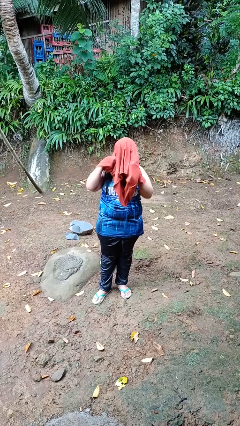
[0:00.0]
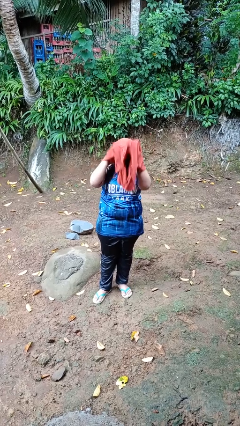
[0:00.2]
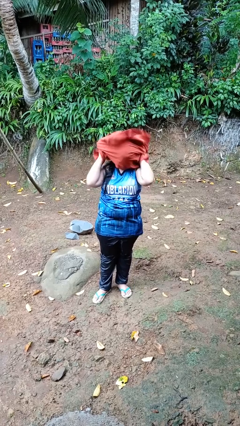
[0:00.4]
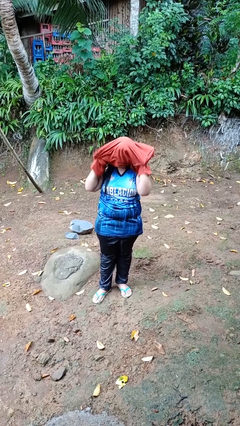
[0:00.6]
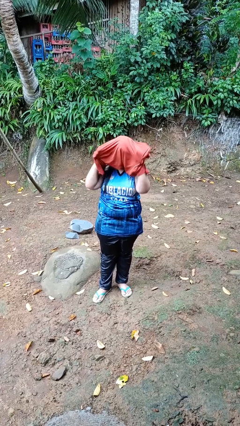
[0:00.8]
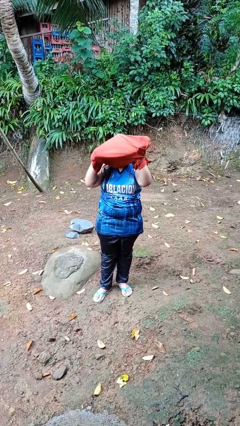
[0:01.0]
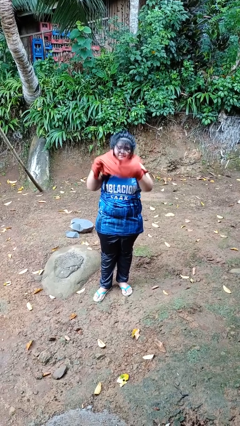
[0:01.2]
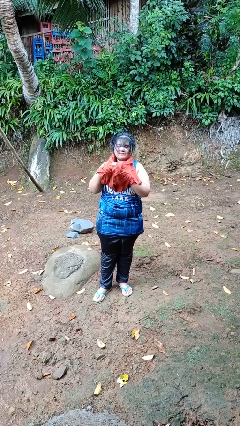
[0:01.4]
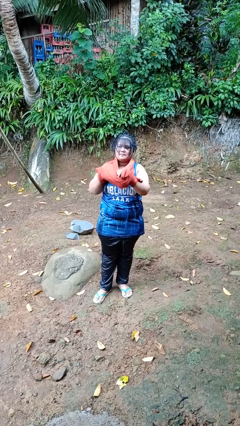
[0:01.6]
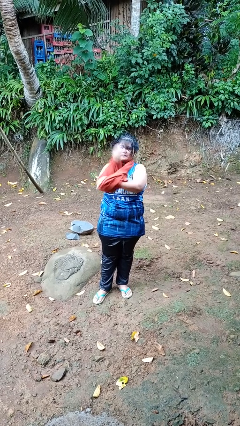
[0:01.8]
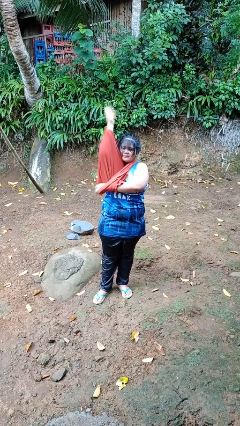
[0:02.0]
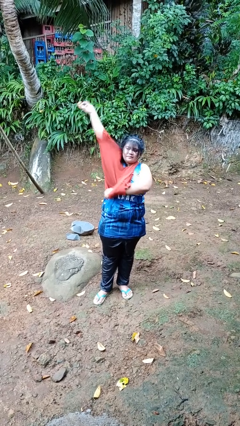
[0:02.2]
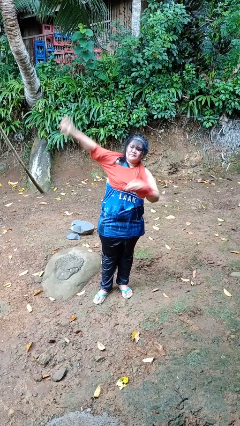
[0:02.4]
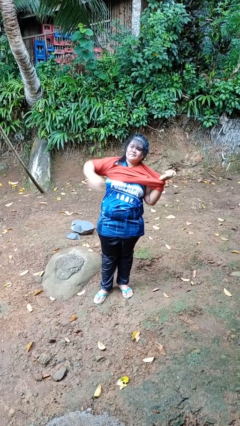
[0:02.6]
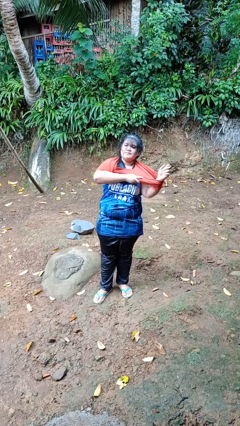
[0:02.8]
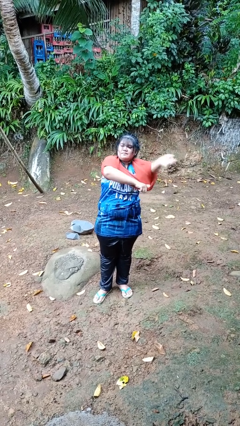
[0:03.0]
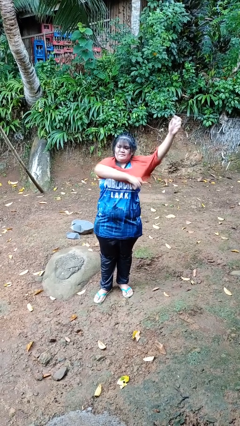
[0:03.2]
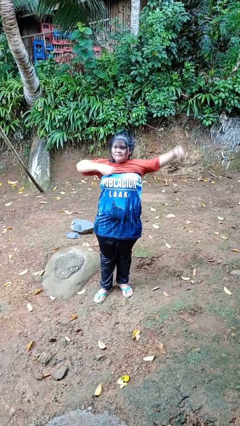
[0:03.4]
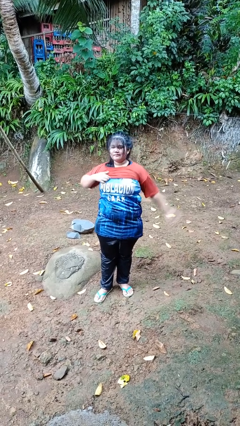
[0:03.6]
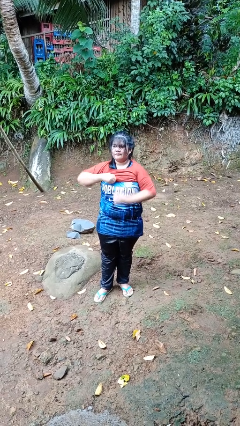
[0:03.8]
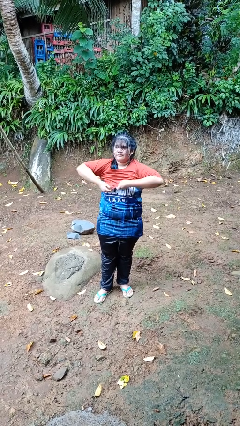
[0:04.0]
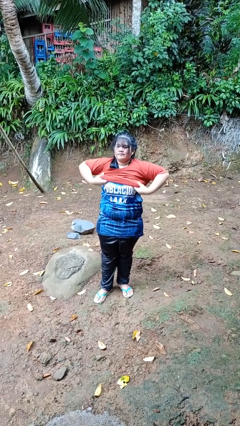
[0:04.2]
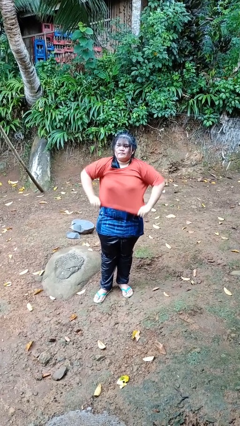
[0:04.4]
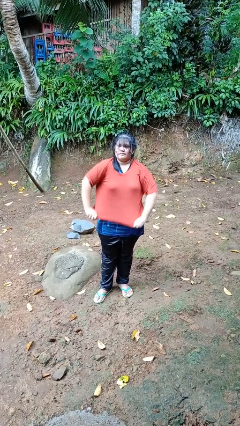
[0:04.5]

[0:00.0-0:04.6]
person puts on shirt

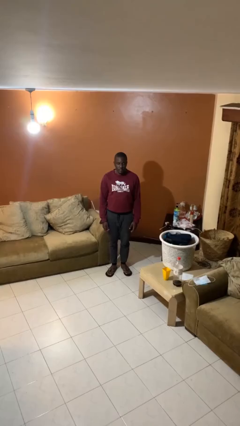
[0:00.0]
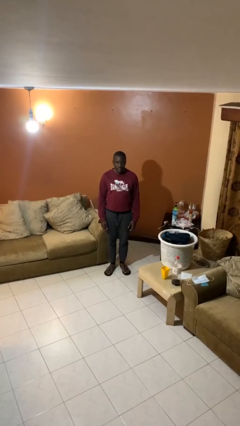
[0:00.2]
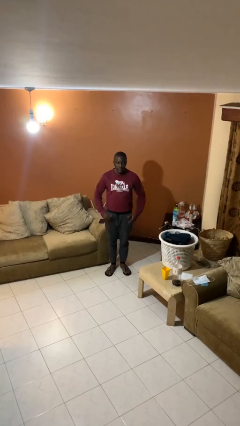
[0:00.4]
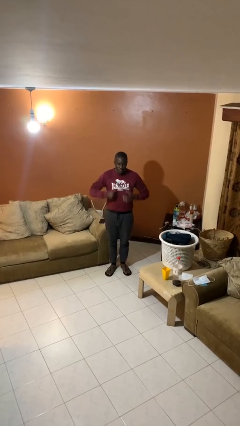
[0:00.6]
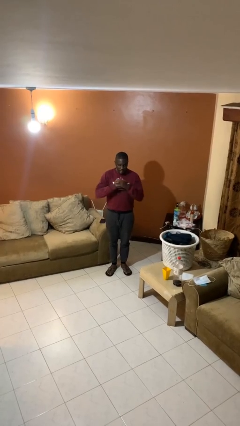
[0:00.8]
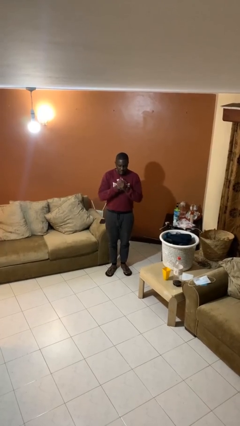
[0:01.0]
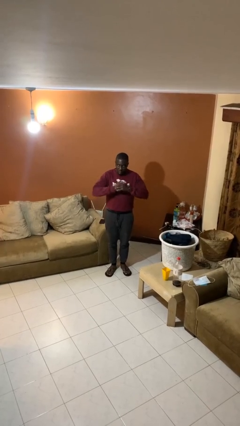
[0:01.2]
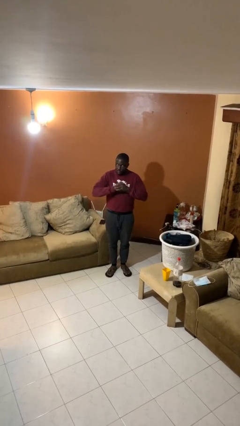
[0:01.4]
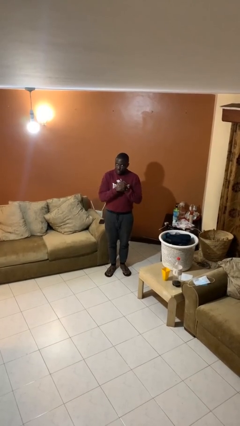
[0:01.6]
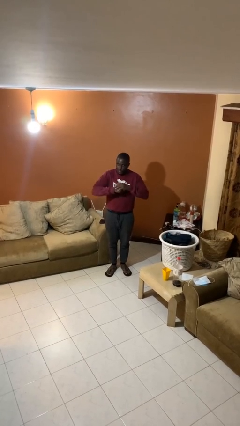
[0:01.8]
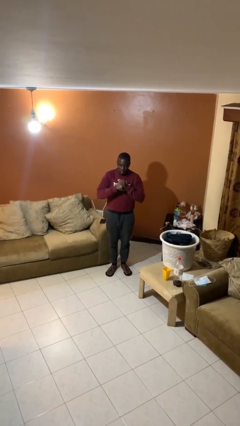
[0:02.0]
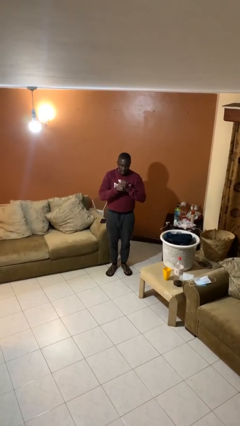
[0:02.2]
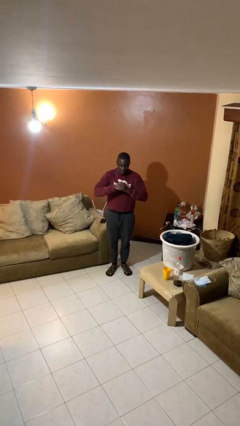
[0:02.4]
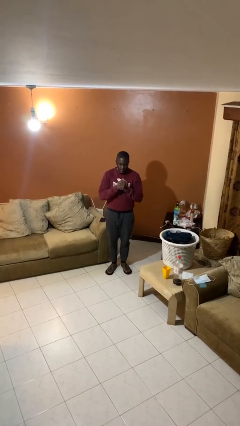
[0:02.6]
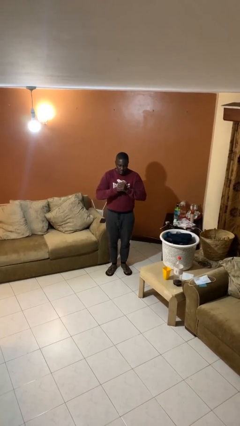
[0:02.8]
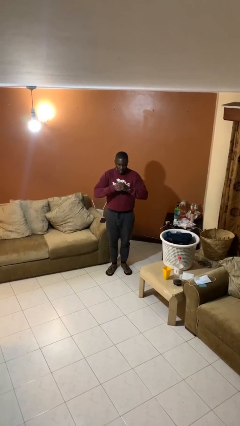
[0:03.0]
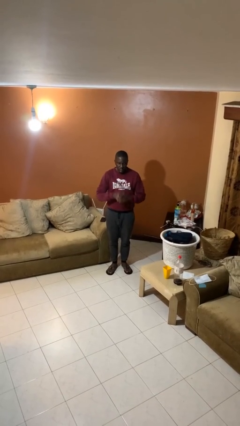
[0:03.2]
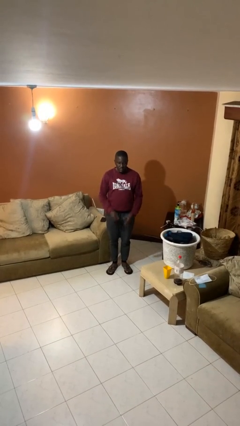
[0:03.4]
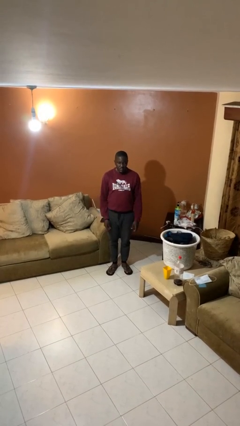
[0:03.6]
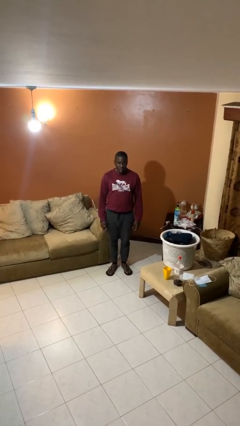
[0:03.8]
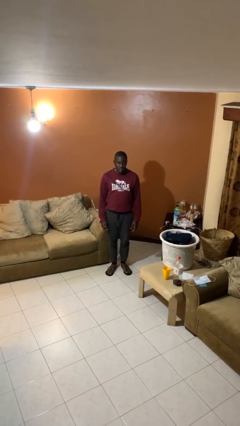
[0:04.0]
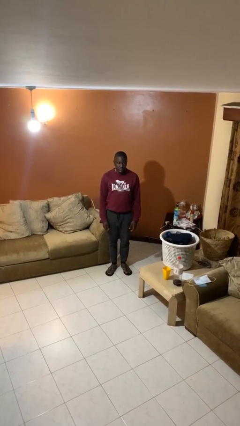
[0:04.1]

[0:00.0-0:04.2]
person cracks knuckles

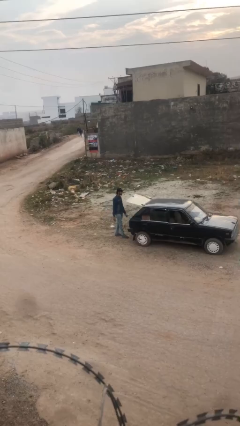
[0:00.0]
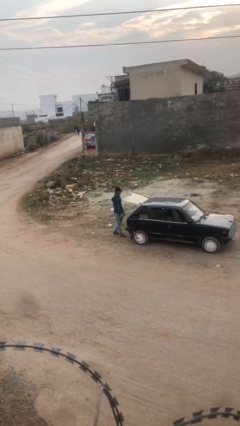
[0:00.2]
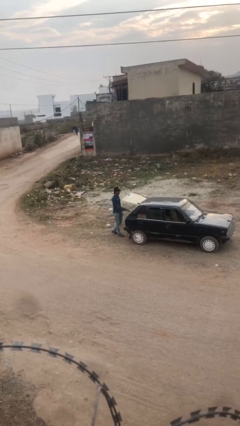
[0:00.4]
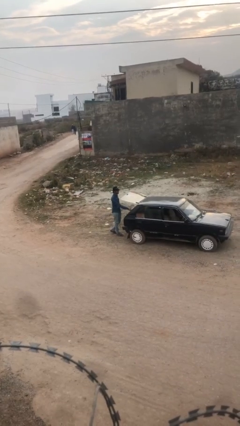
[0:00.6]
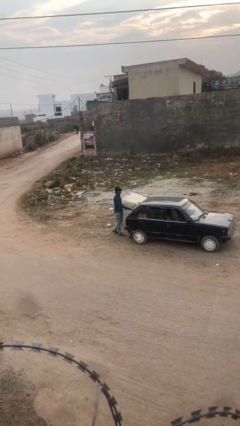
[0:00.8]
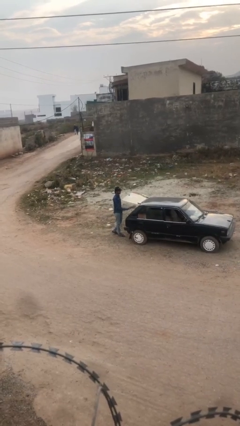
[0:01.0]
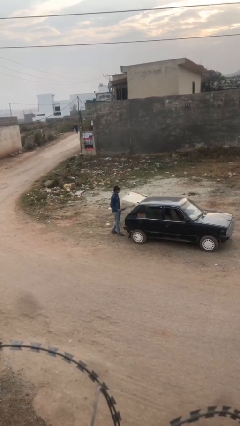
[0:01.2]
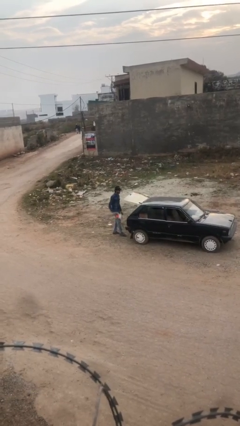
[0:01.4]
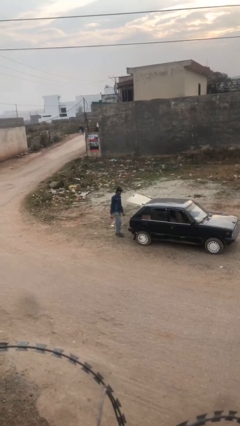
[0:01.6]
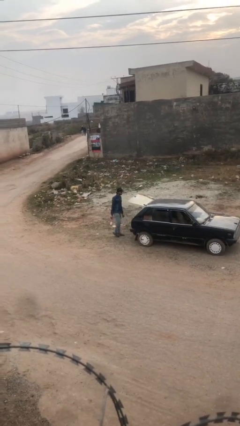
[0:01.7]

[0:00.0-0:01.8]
person unloads car

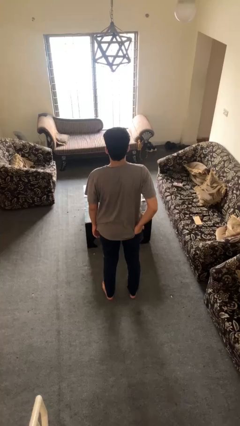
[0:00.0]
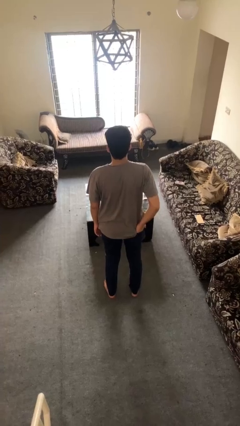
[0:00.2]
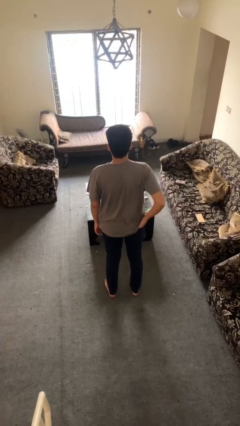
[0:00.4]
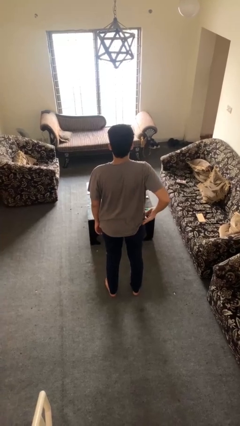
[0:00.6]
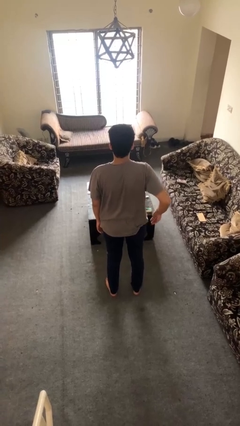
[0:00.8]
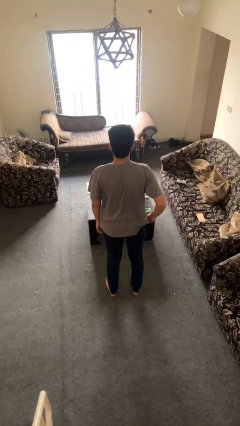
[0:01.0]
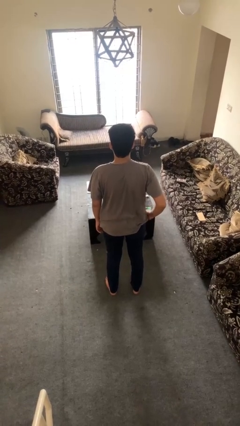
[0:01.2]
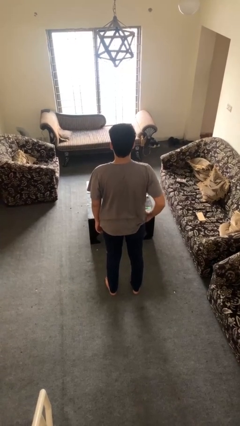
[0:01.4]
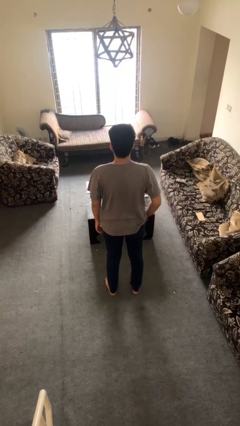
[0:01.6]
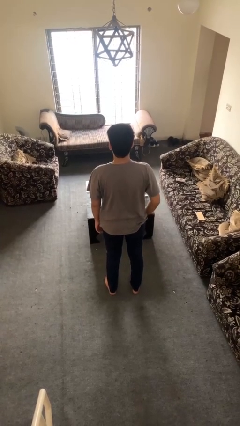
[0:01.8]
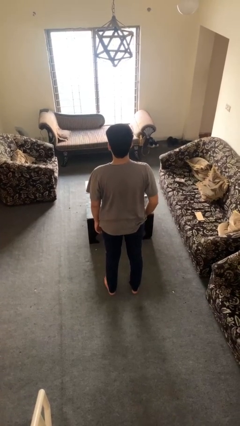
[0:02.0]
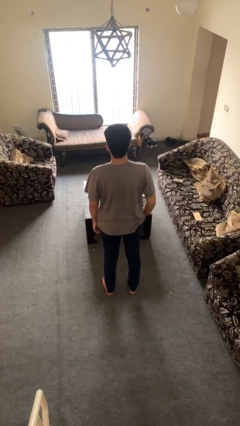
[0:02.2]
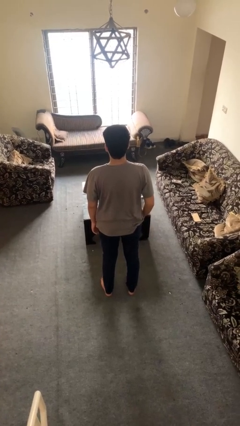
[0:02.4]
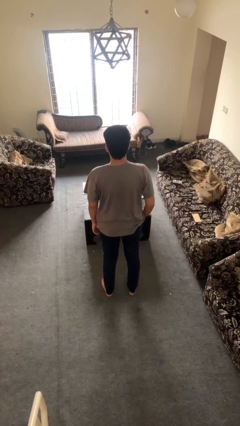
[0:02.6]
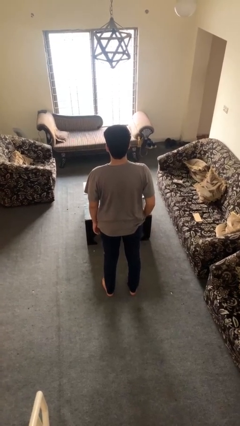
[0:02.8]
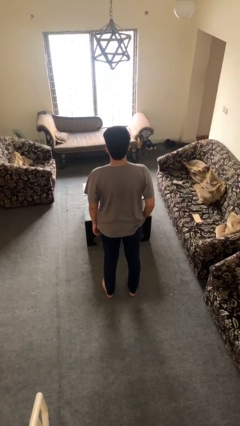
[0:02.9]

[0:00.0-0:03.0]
person puts hands in back pockets

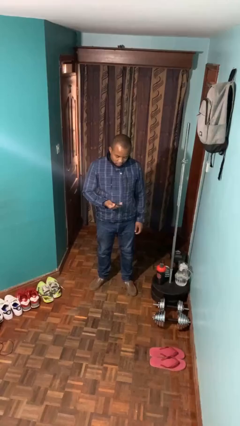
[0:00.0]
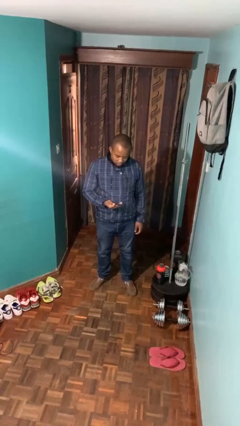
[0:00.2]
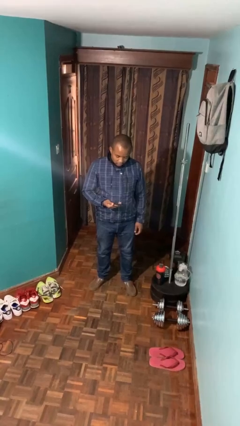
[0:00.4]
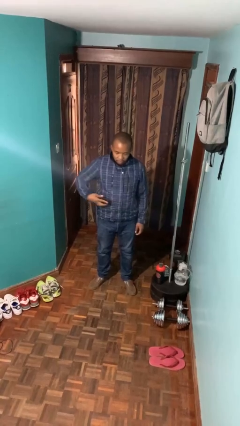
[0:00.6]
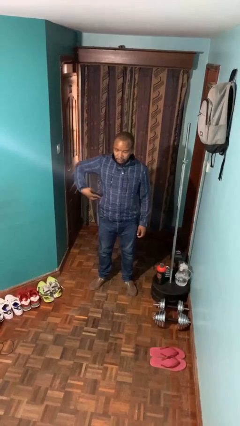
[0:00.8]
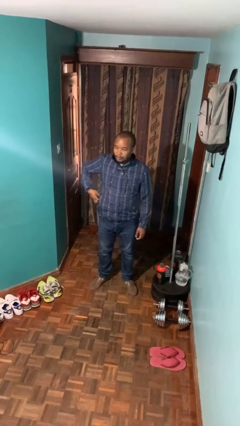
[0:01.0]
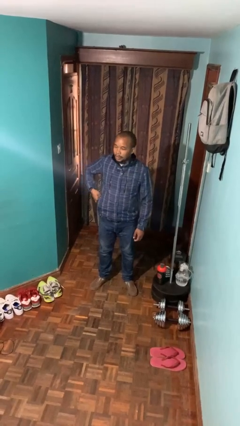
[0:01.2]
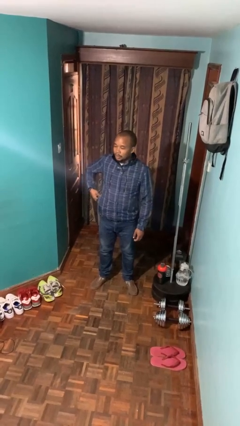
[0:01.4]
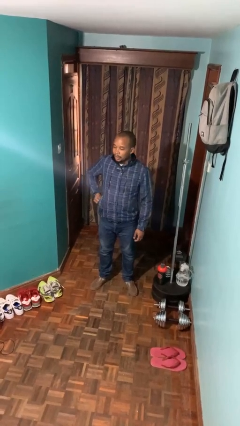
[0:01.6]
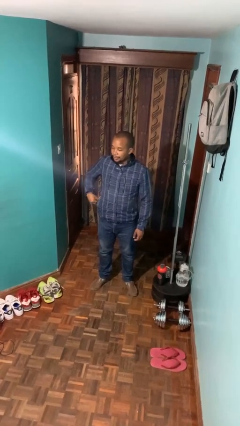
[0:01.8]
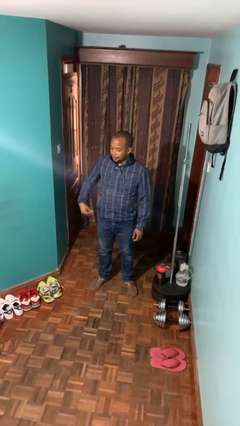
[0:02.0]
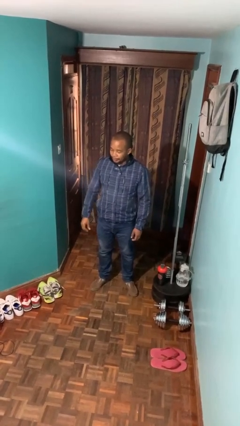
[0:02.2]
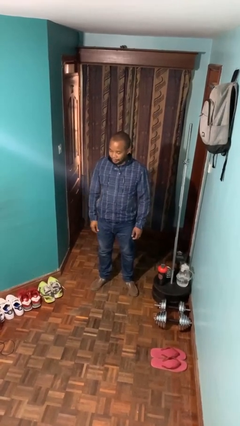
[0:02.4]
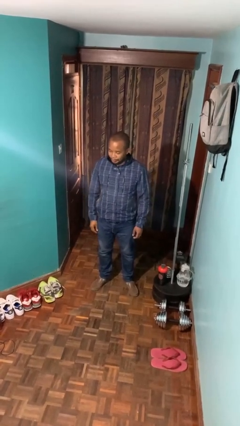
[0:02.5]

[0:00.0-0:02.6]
person puts phone into pocket

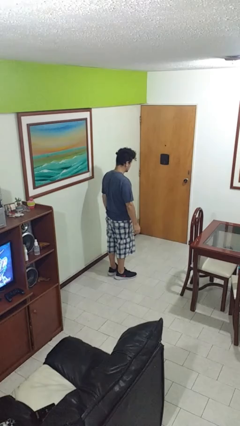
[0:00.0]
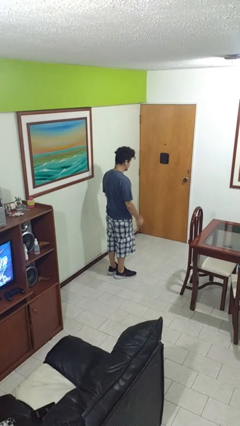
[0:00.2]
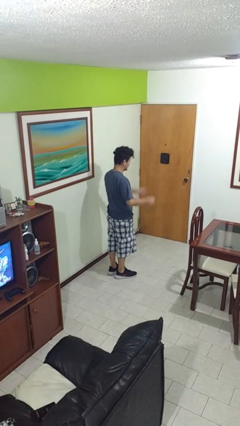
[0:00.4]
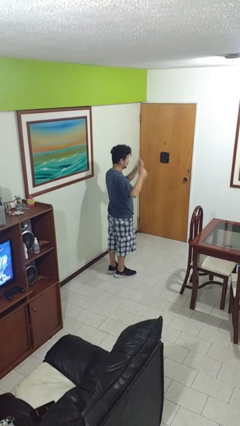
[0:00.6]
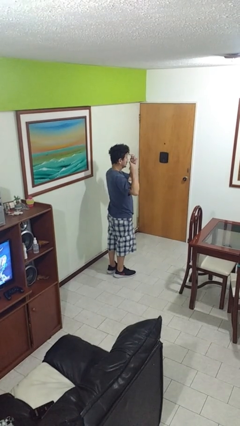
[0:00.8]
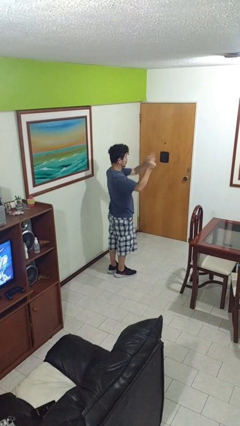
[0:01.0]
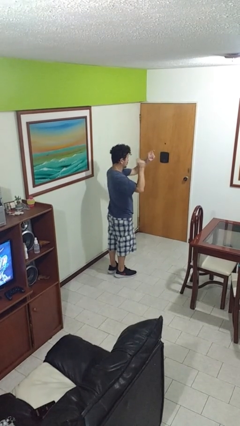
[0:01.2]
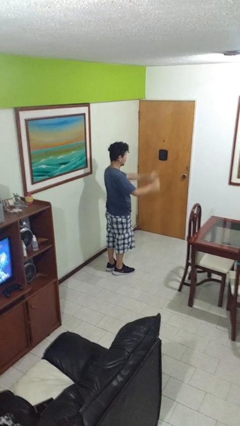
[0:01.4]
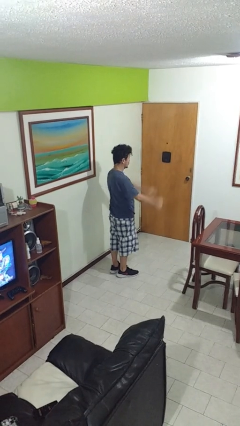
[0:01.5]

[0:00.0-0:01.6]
person snaps fingers
